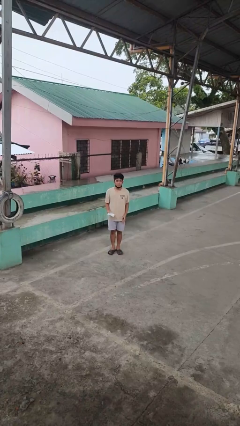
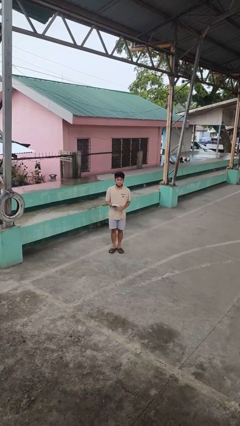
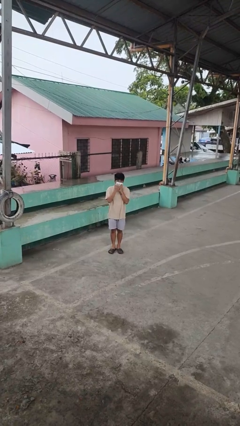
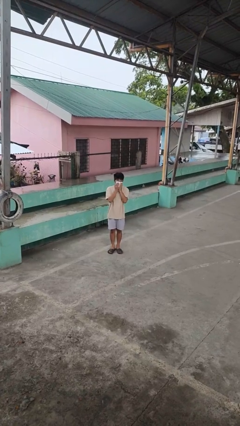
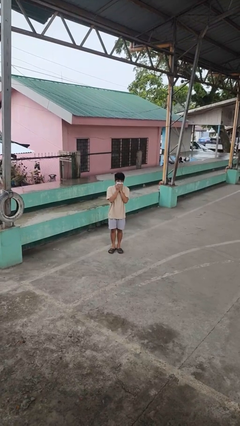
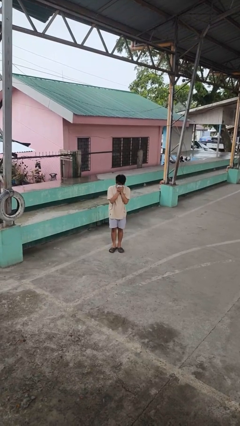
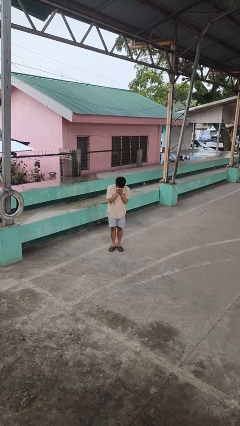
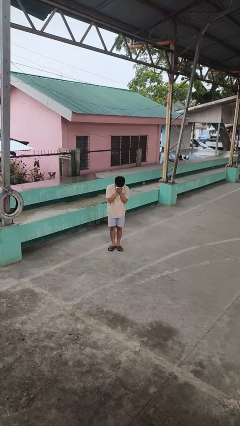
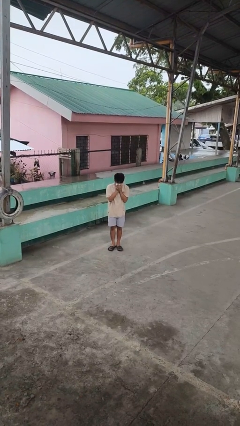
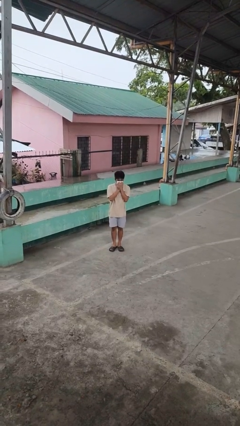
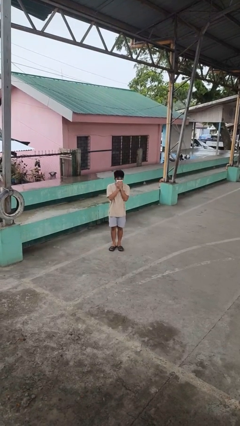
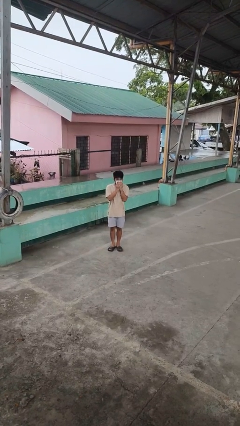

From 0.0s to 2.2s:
person blows nose

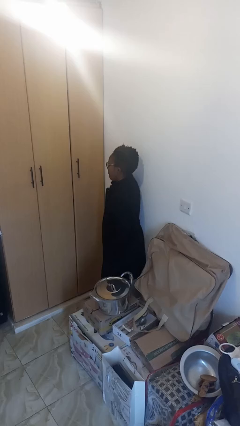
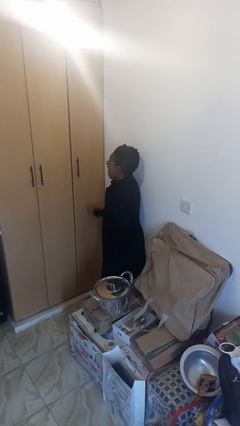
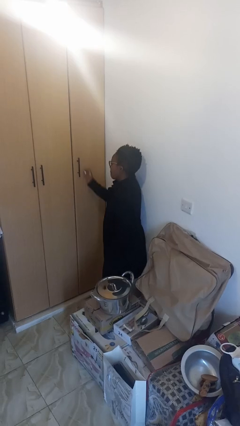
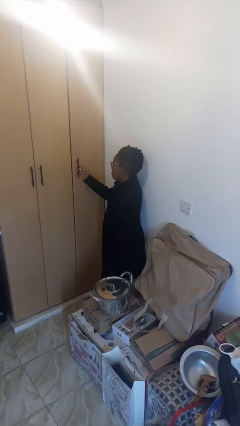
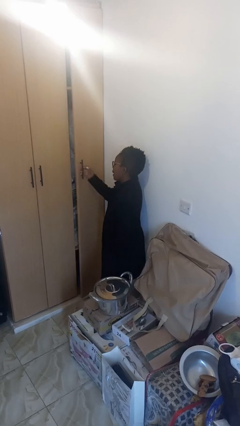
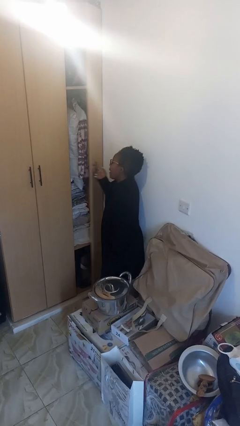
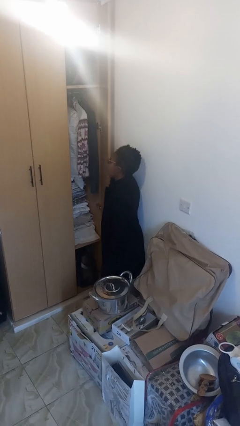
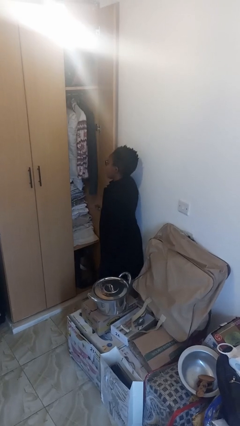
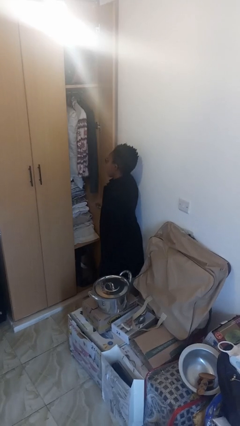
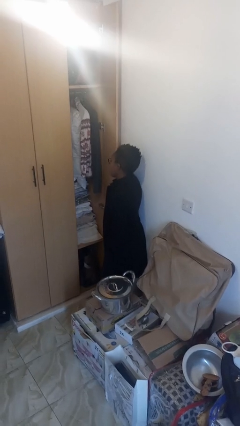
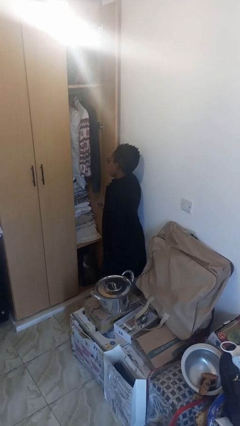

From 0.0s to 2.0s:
person opens closet door

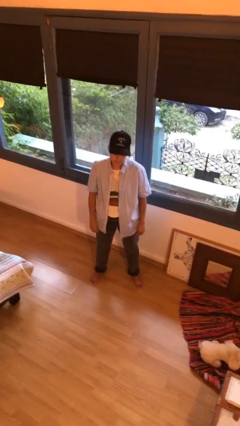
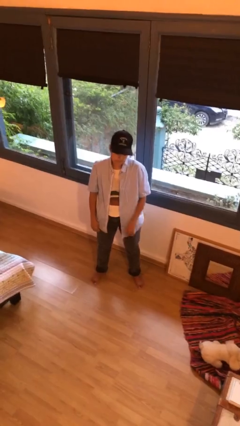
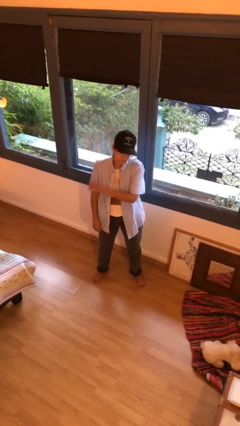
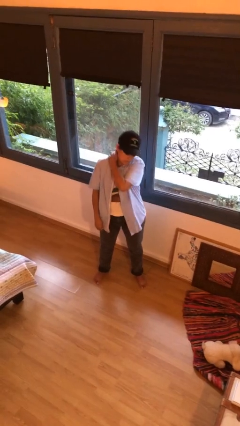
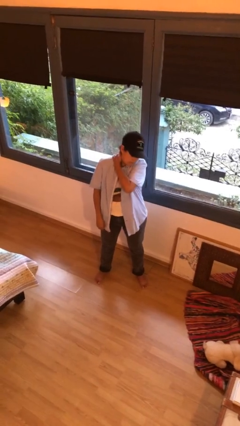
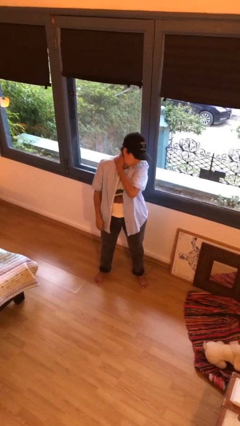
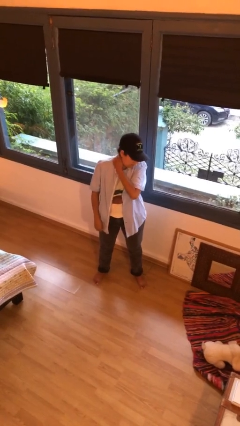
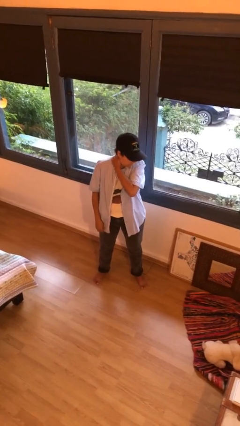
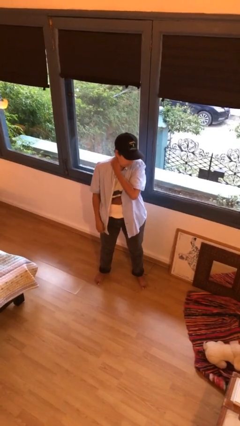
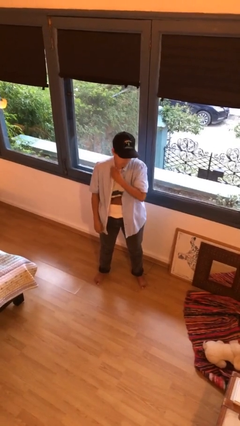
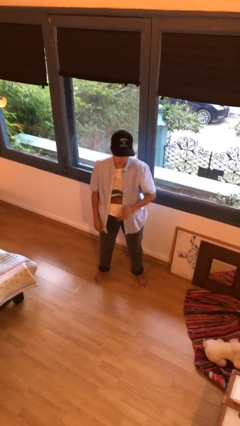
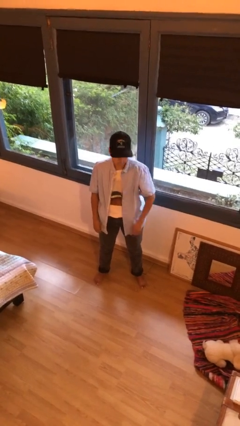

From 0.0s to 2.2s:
person rubs neck

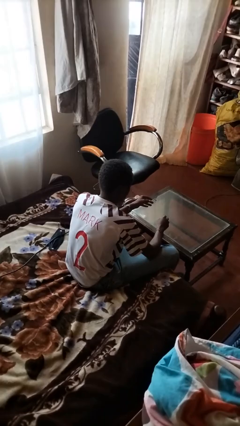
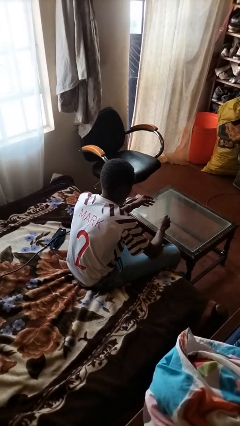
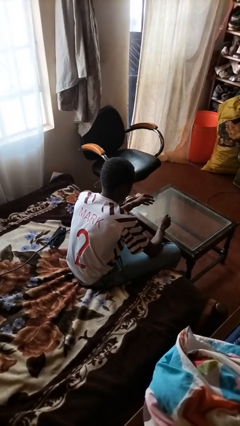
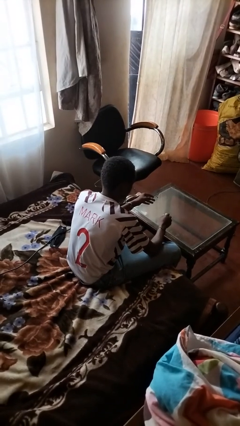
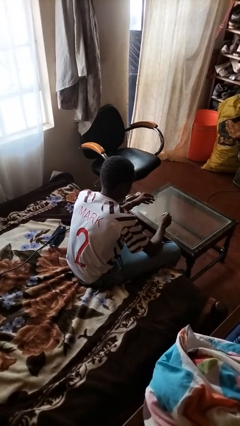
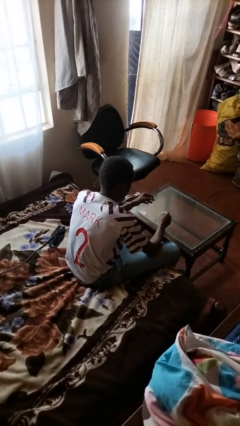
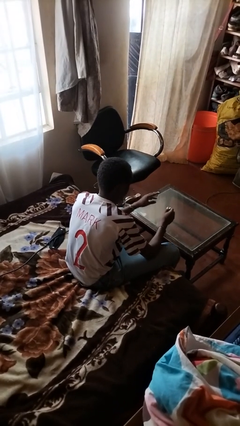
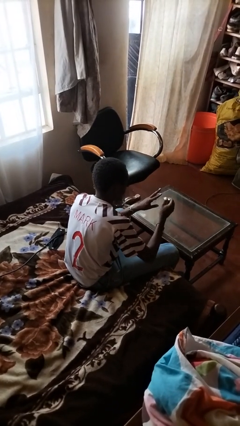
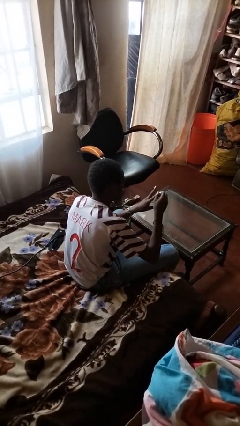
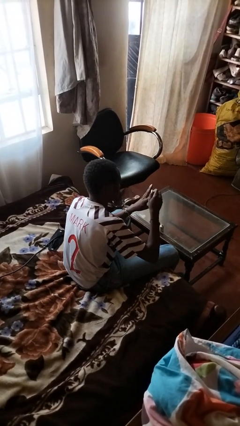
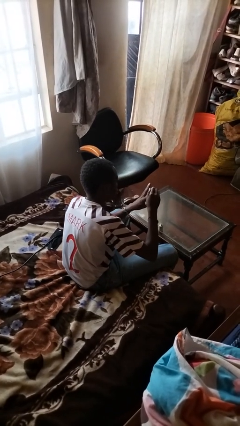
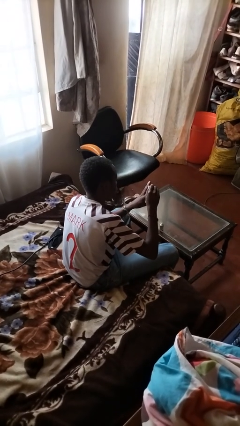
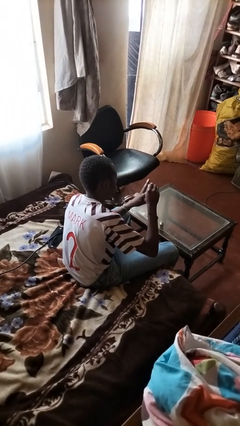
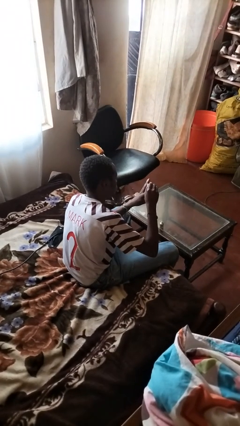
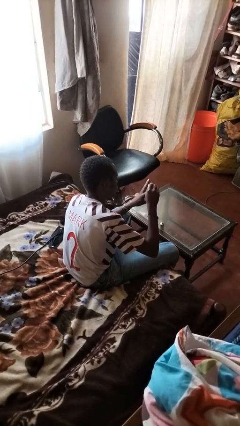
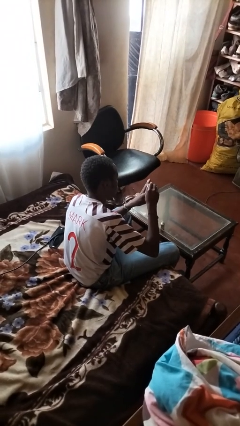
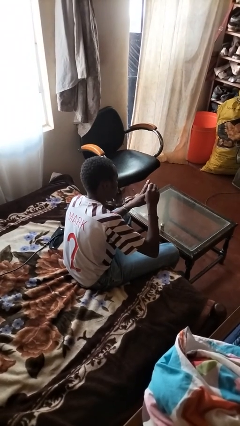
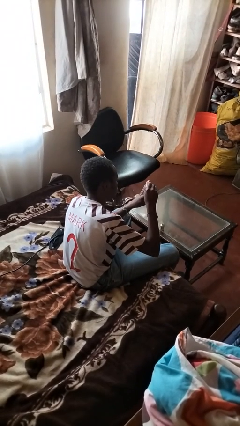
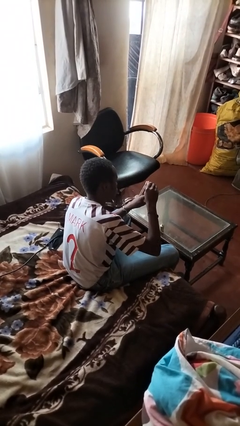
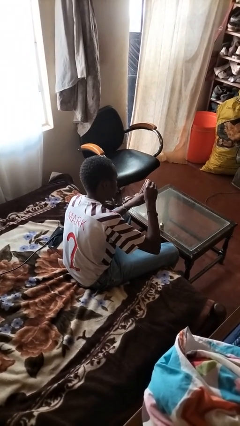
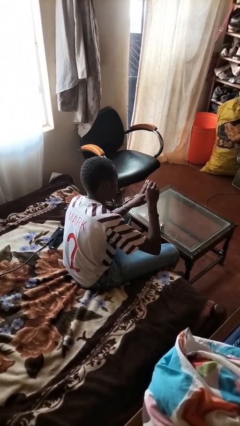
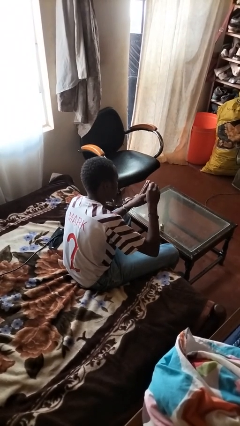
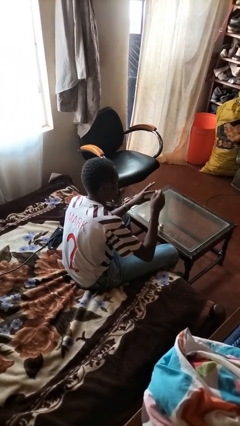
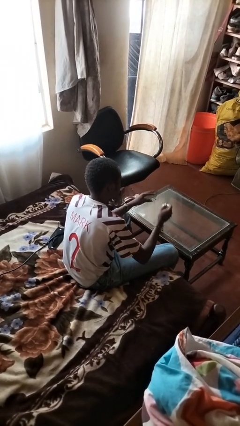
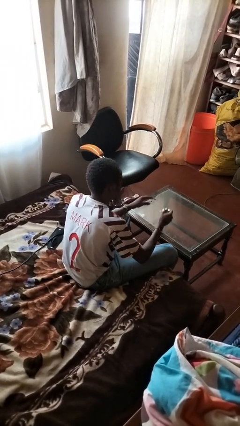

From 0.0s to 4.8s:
person paints fingernails

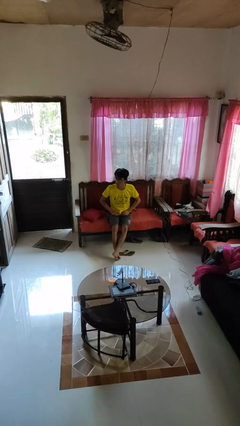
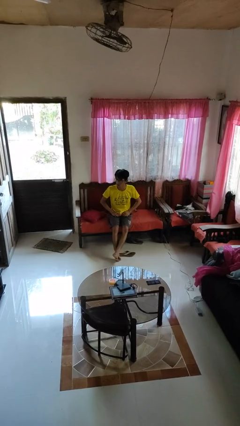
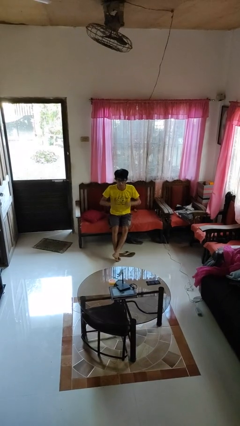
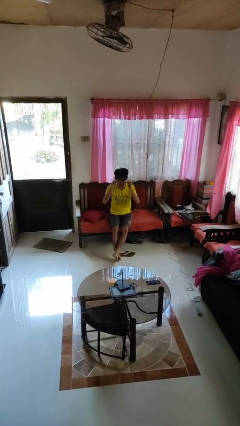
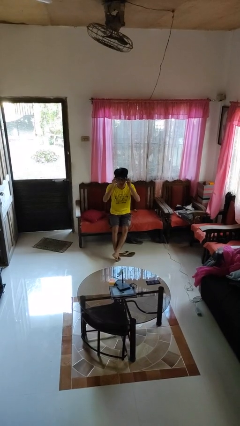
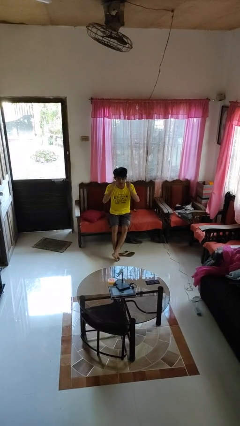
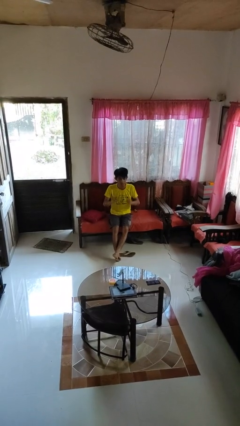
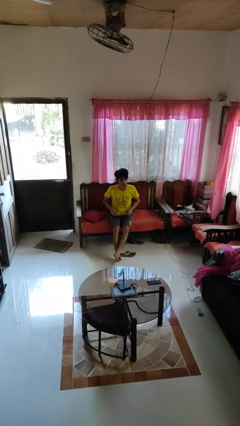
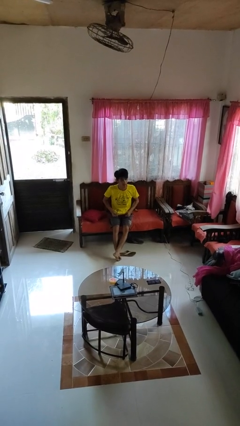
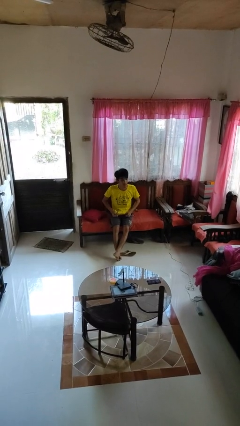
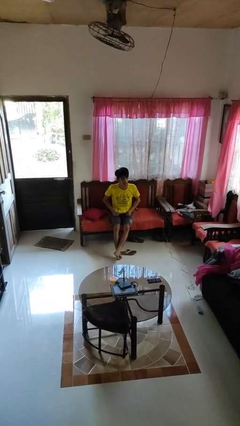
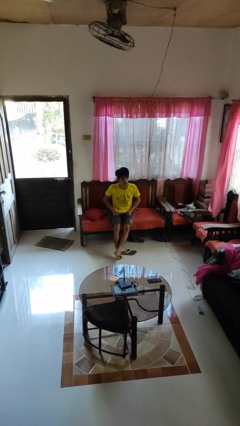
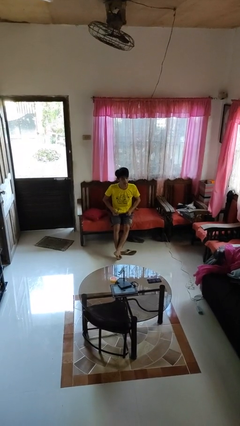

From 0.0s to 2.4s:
person takes off glasses

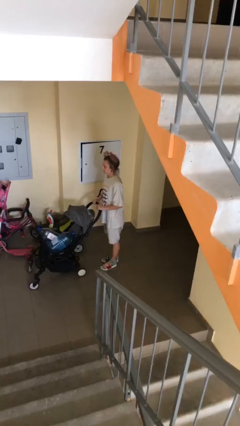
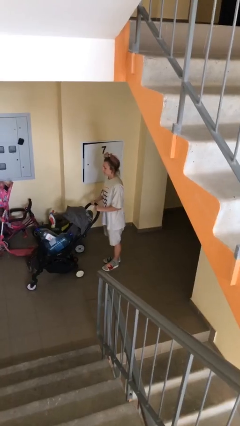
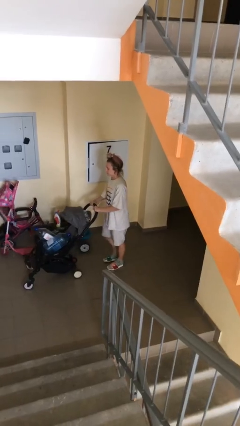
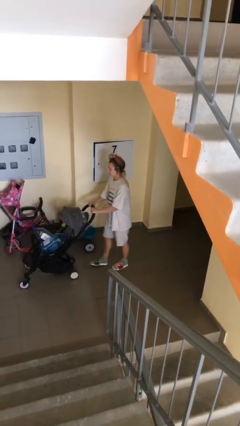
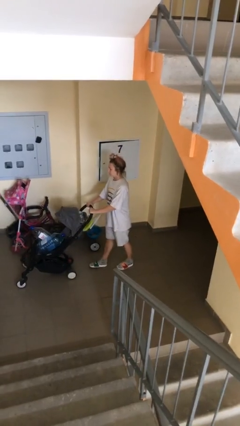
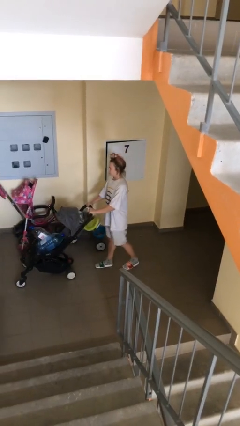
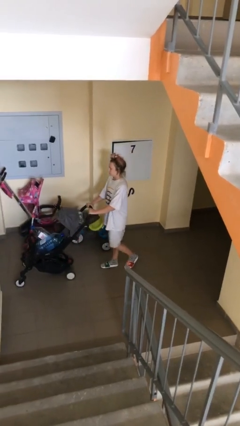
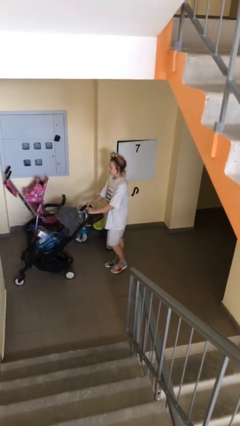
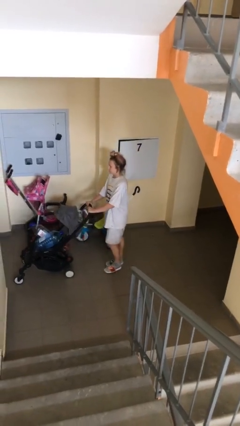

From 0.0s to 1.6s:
person pushes wheeled cart

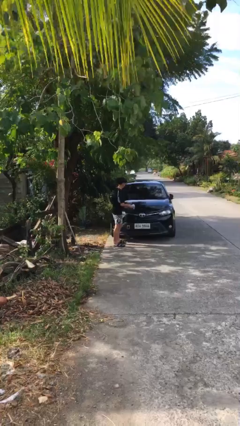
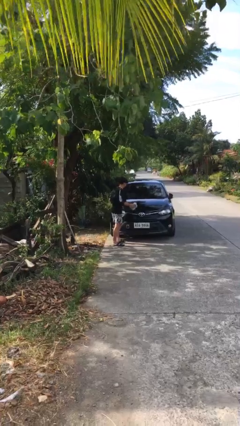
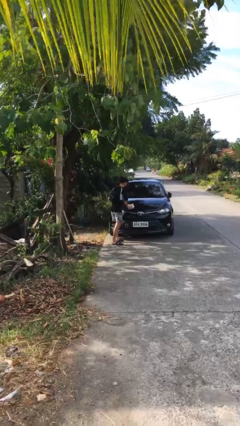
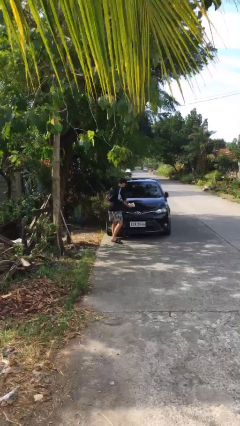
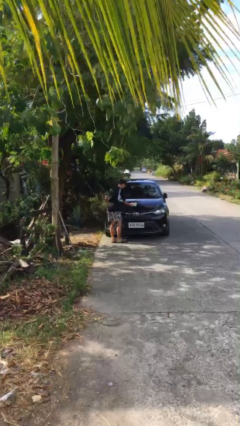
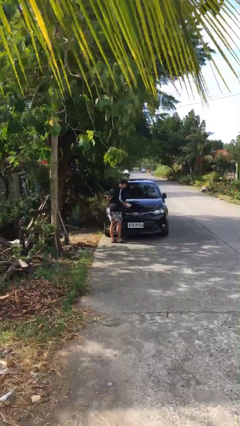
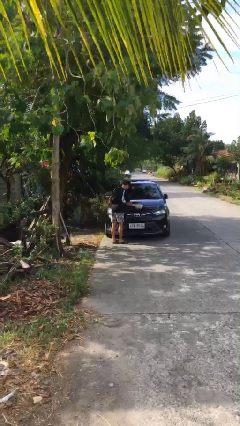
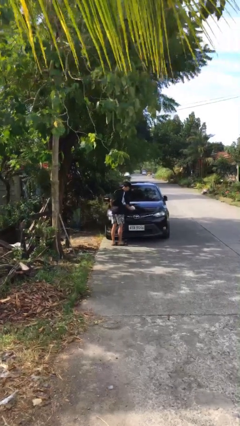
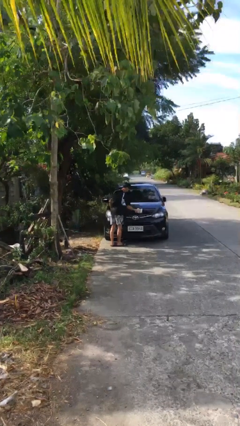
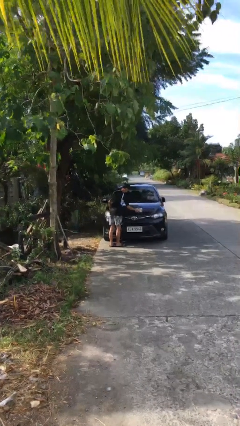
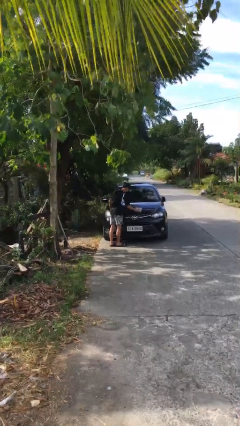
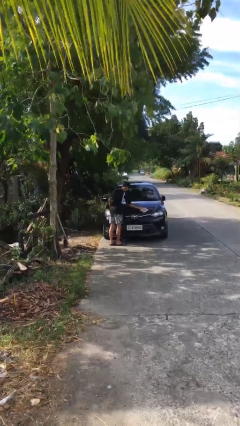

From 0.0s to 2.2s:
person polishes car with rag
